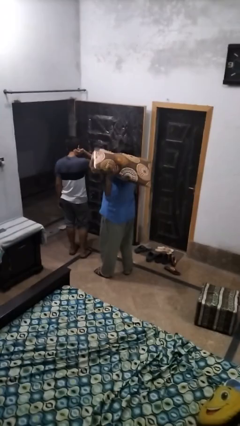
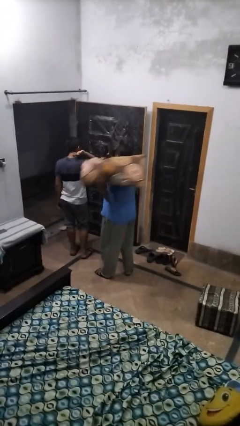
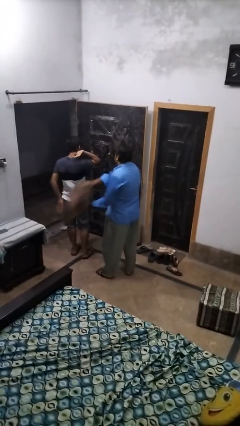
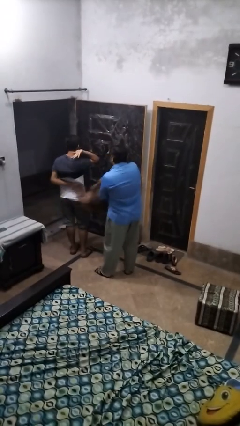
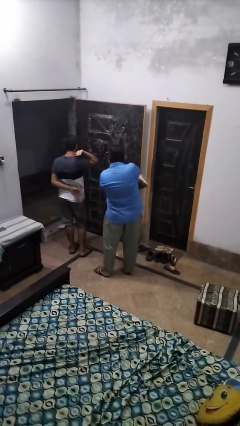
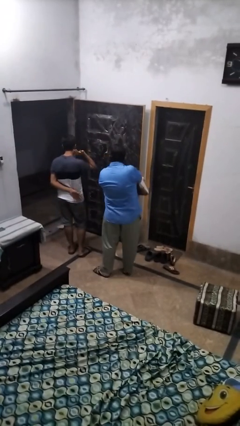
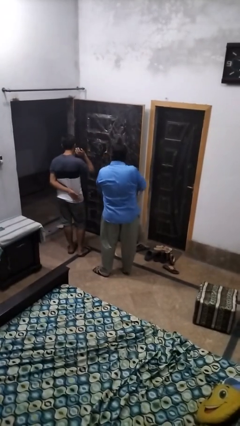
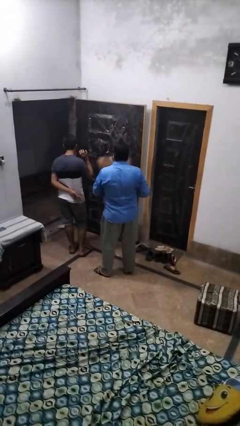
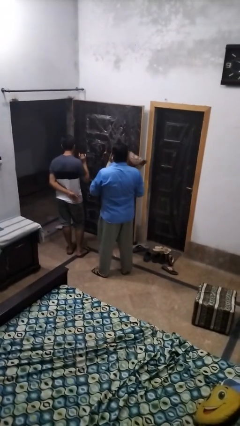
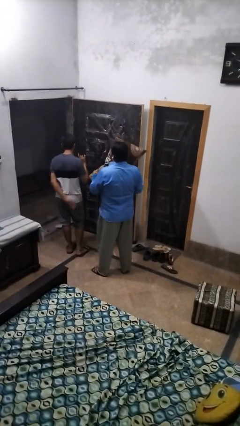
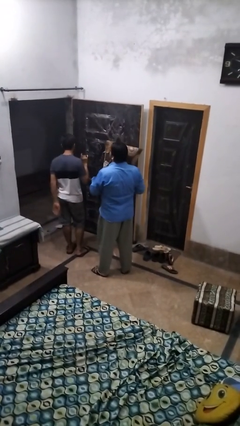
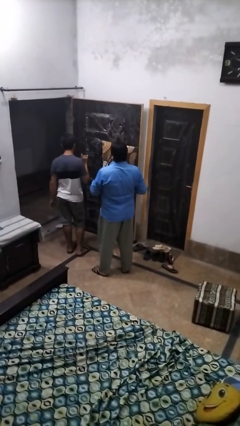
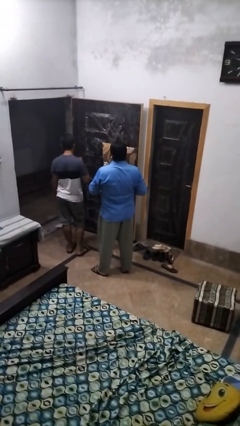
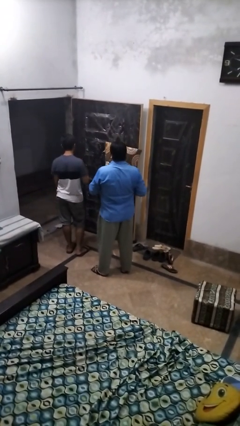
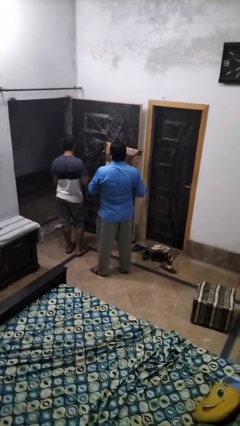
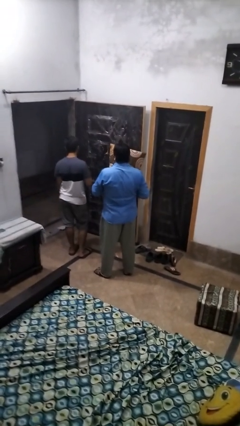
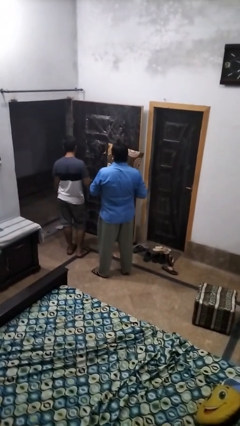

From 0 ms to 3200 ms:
person hits person with pillow

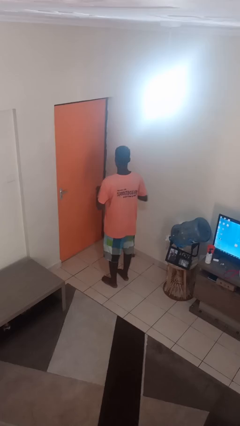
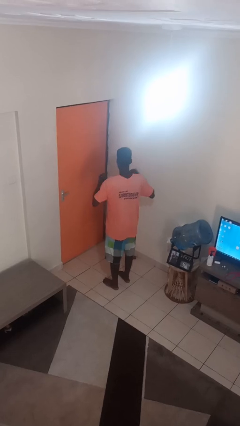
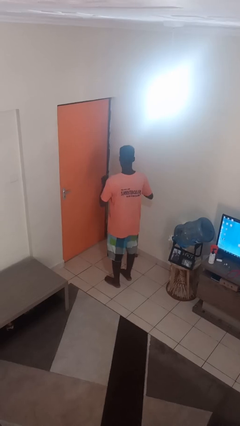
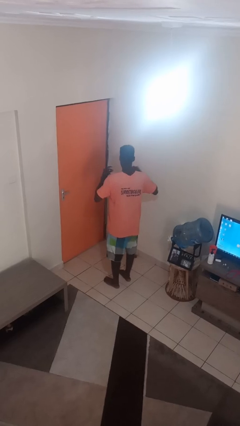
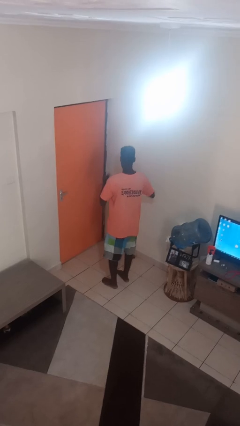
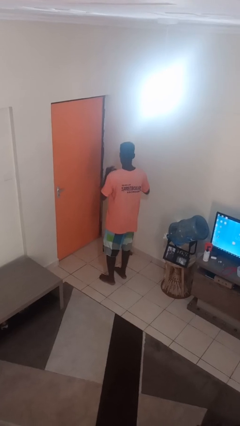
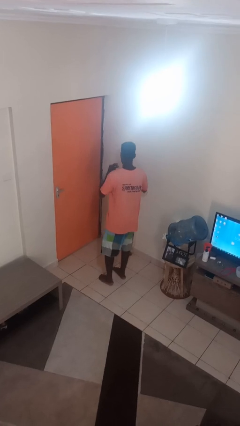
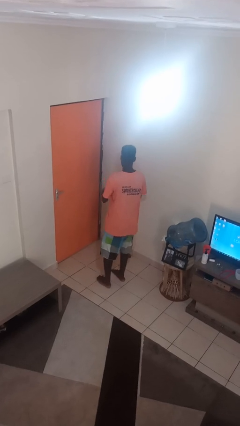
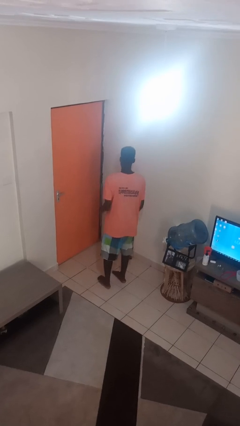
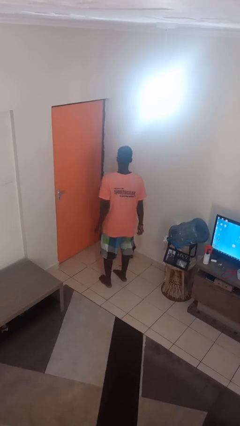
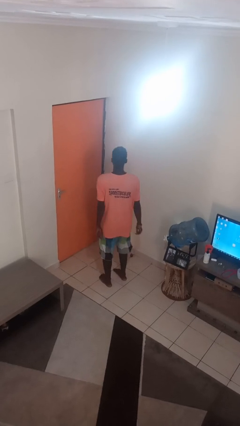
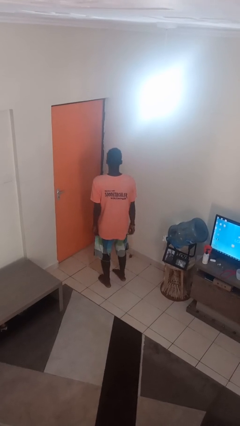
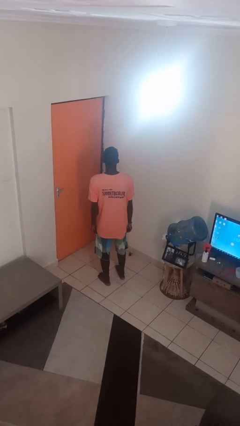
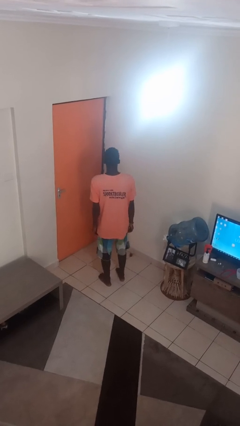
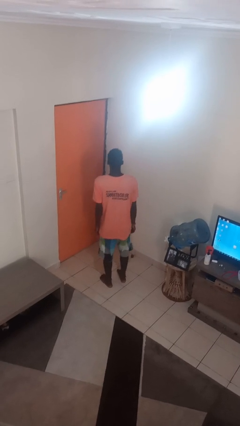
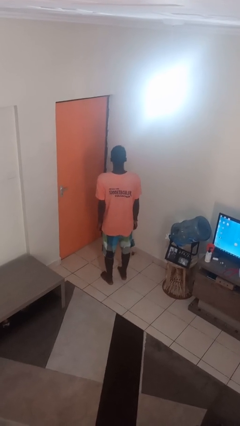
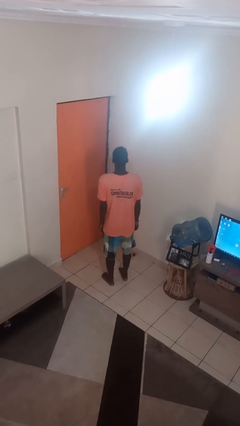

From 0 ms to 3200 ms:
person snaps fingers

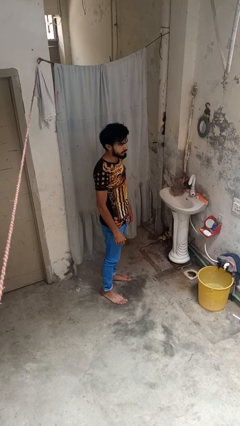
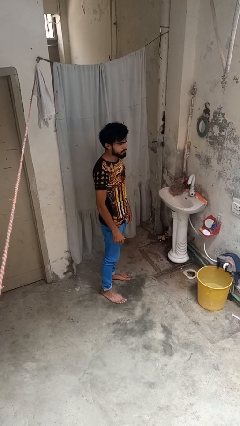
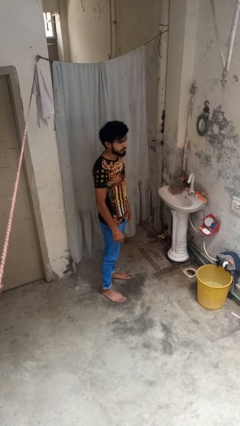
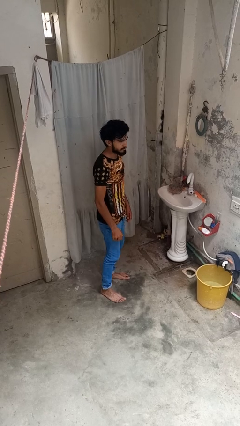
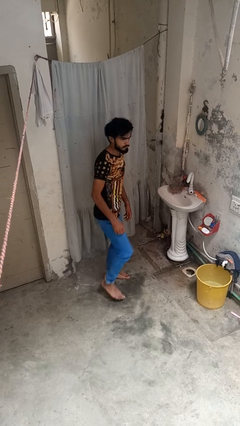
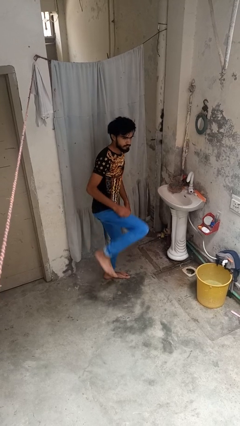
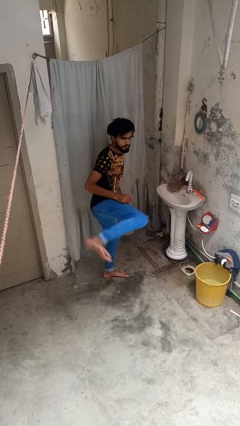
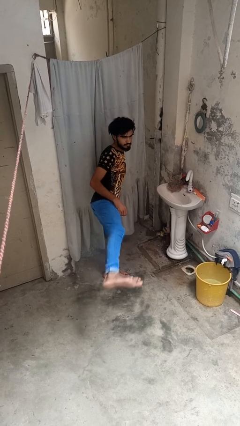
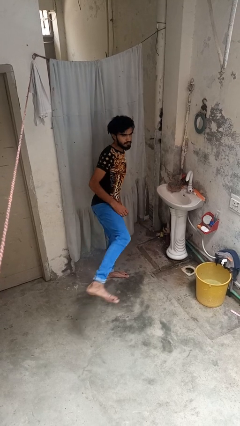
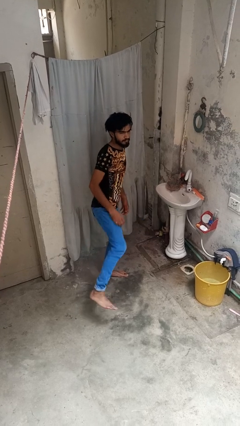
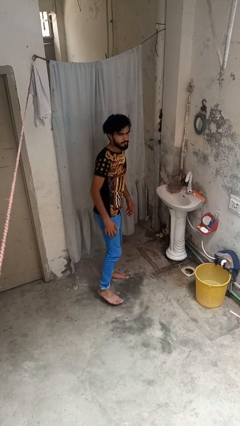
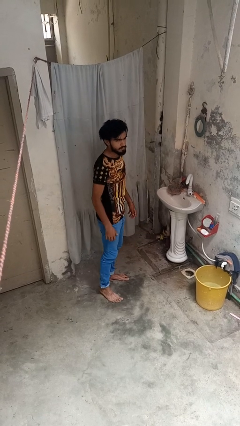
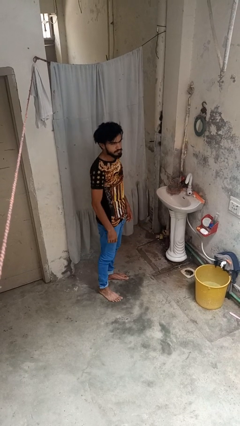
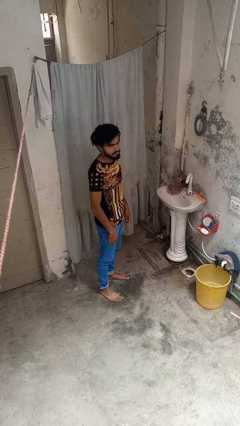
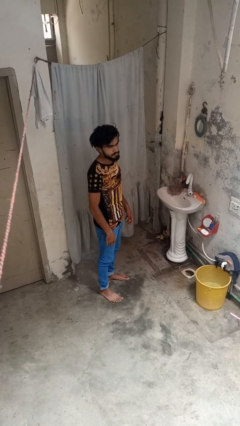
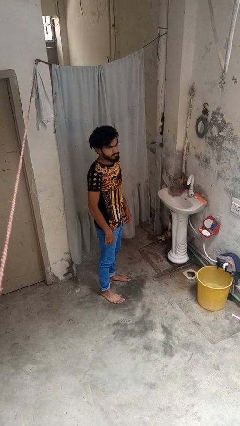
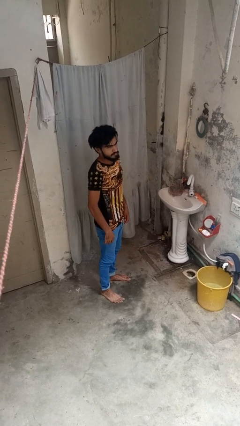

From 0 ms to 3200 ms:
person karate kicks

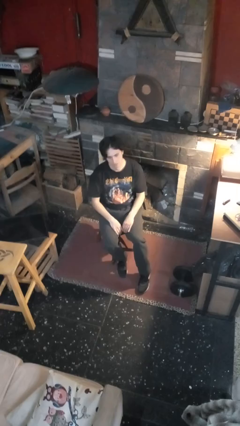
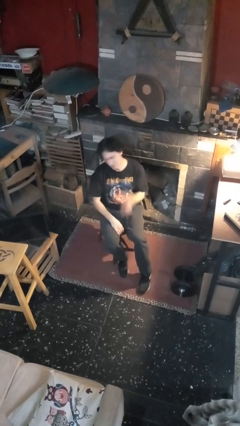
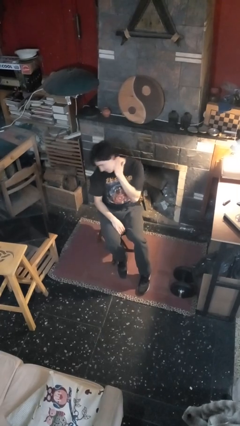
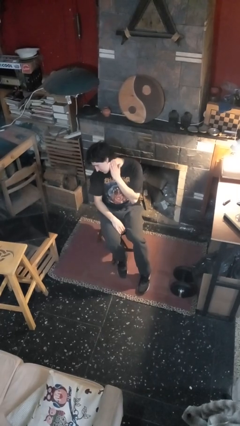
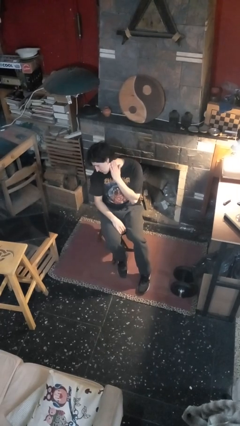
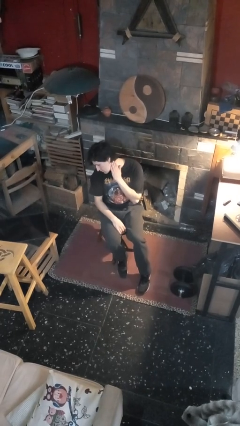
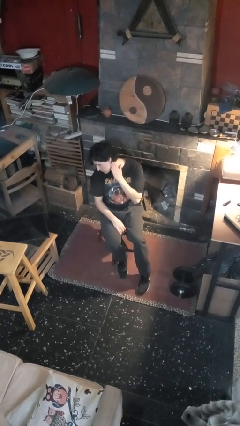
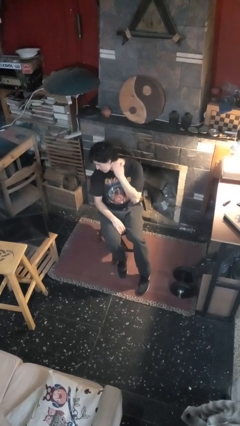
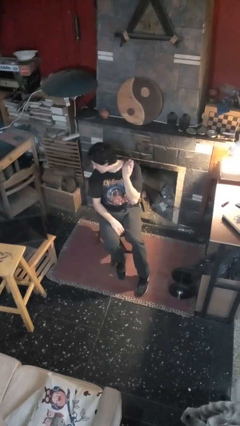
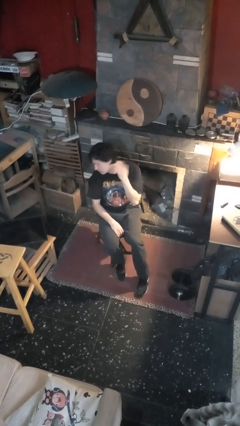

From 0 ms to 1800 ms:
person swats bug

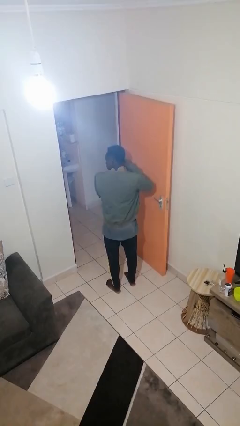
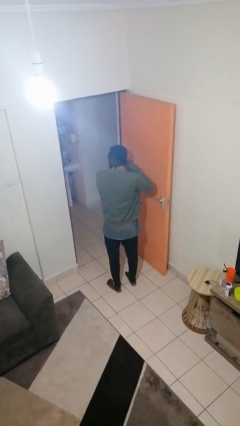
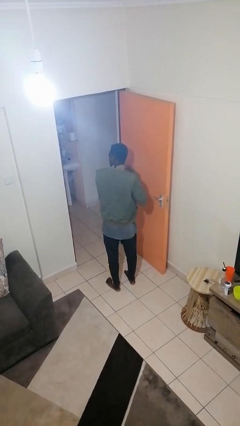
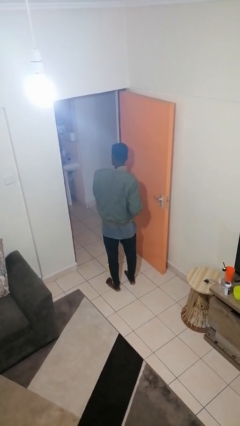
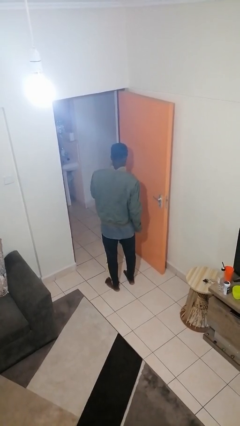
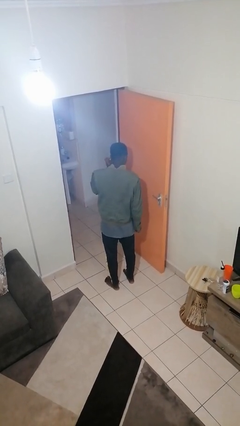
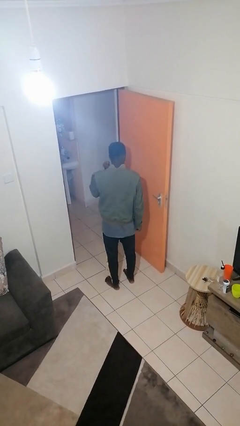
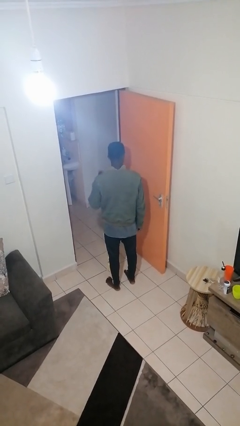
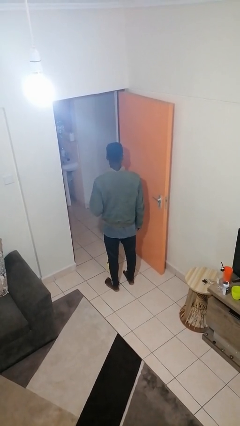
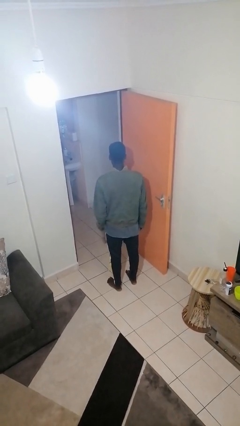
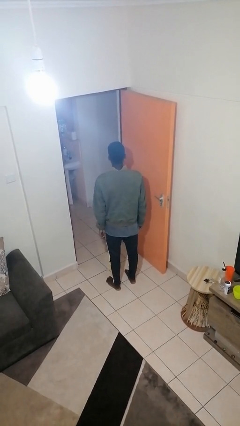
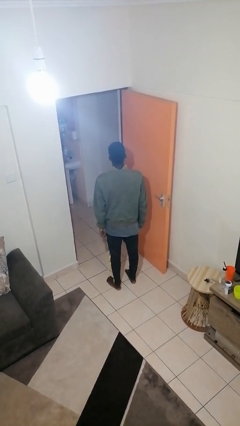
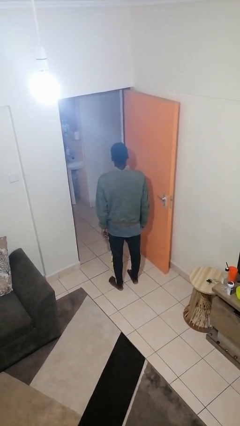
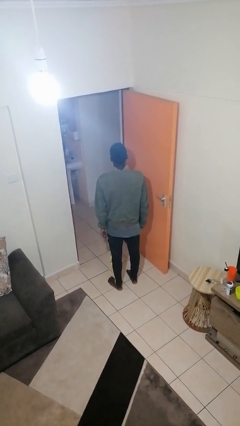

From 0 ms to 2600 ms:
person takes off earrings

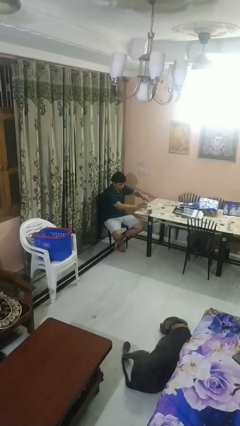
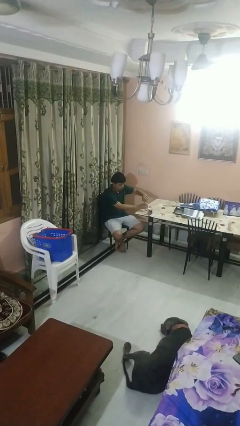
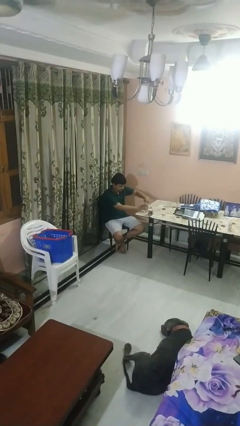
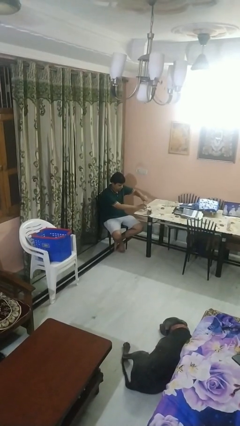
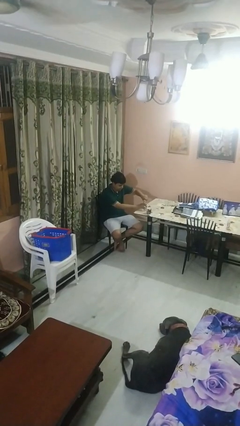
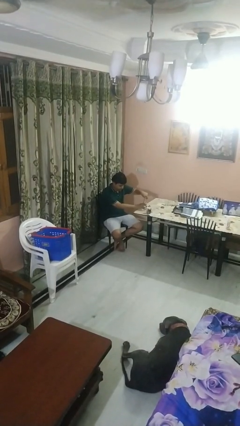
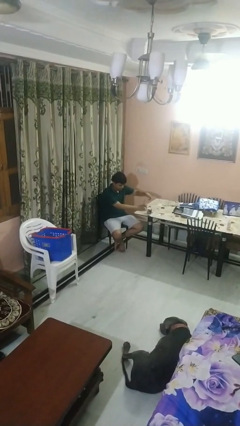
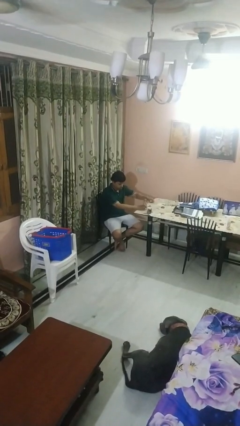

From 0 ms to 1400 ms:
person unscrews lid from bottle

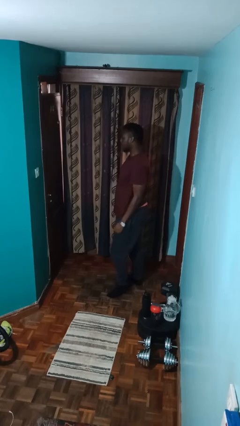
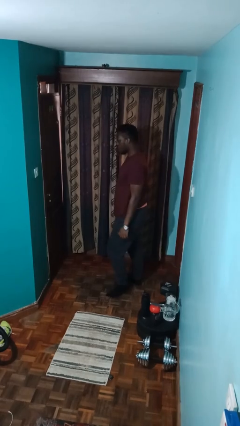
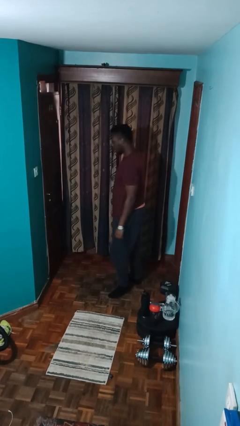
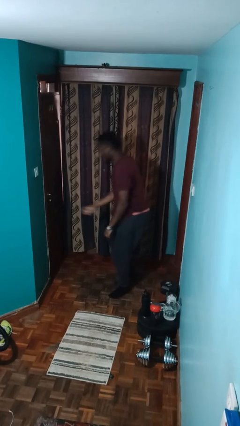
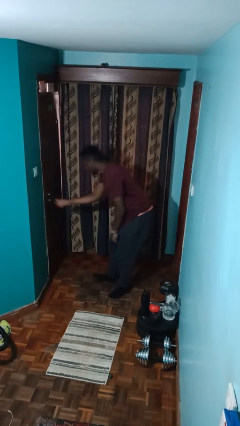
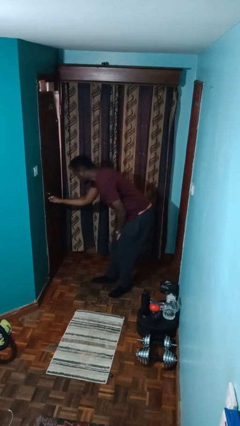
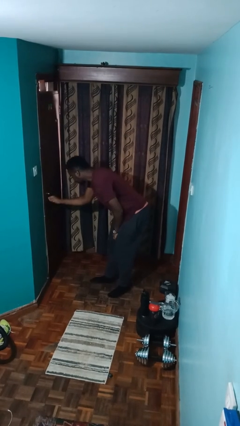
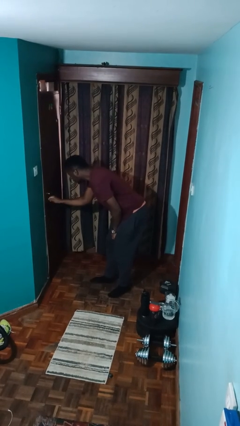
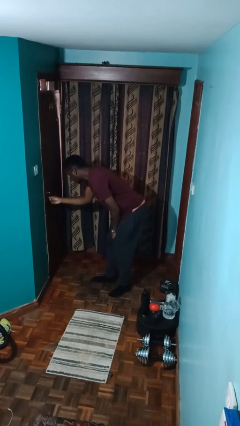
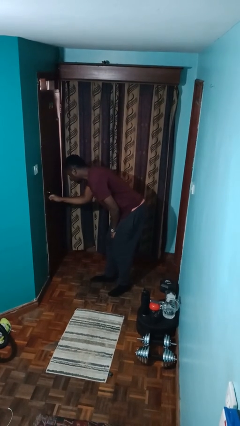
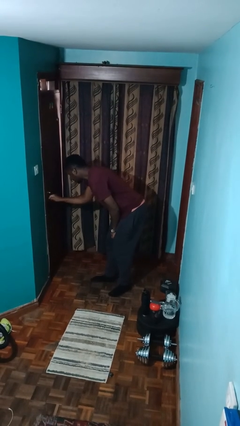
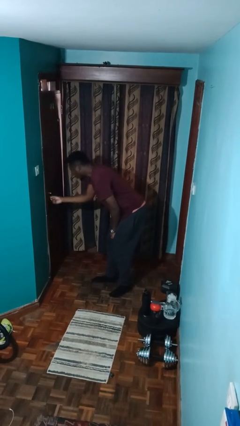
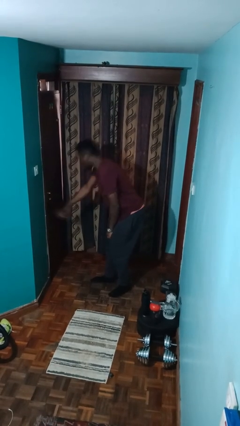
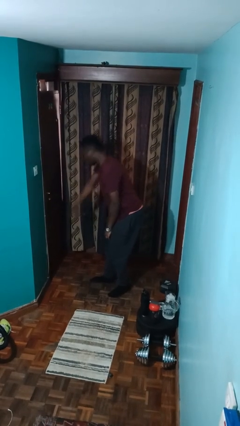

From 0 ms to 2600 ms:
person unlocks door with keys
